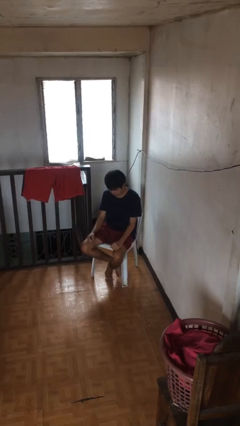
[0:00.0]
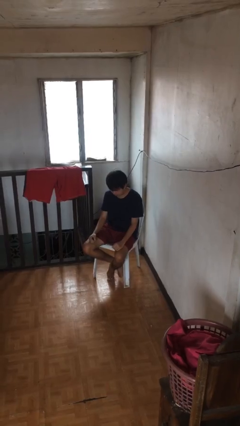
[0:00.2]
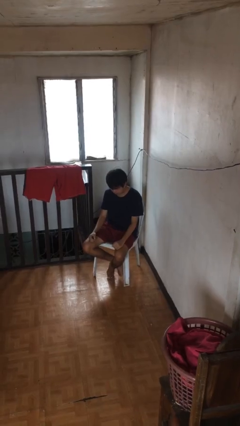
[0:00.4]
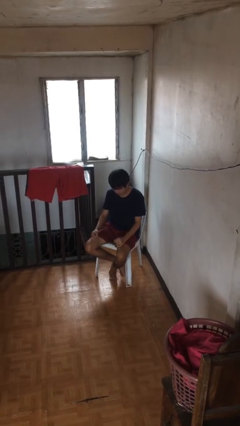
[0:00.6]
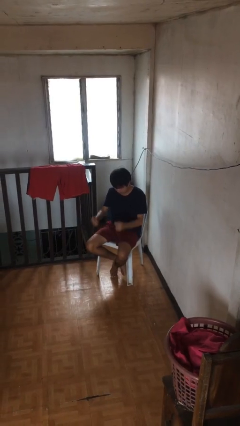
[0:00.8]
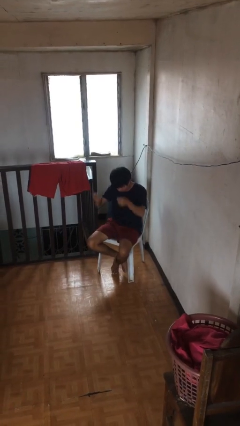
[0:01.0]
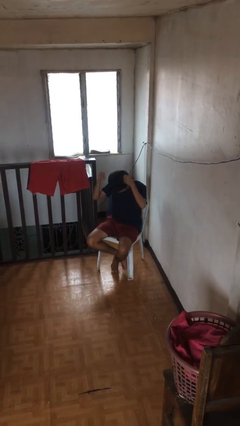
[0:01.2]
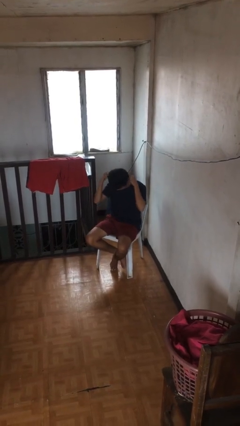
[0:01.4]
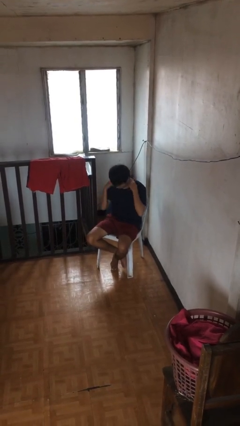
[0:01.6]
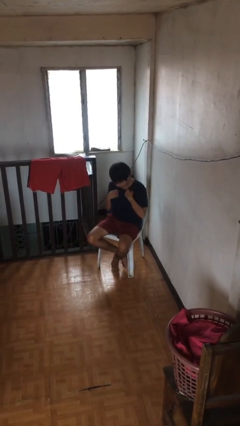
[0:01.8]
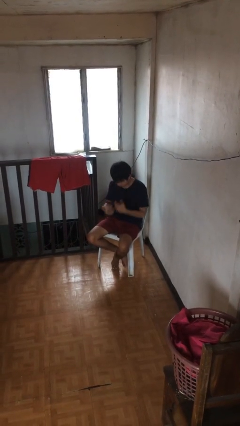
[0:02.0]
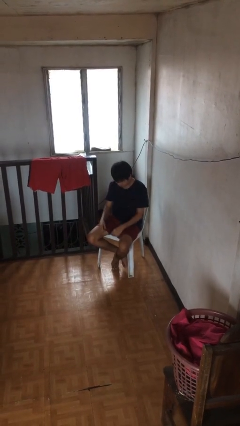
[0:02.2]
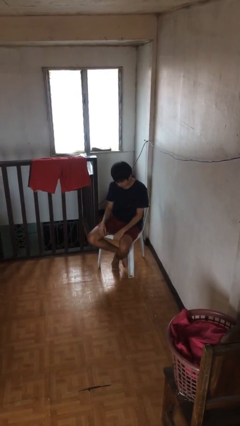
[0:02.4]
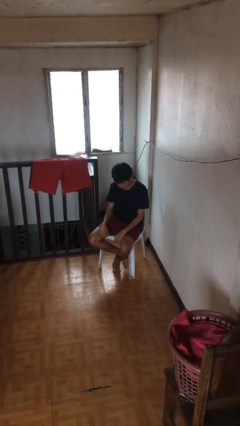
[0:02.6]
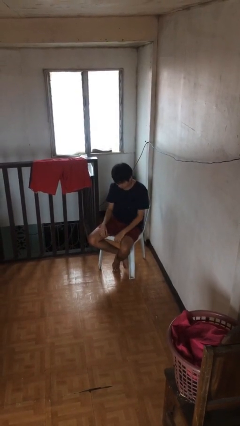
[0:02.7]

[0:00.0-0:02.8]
person puts on necklace

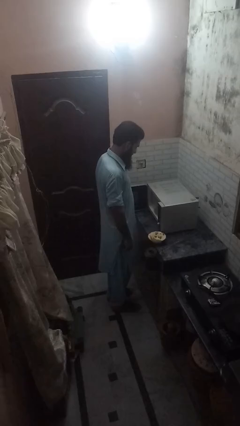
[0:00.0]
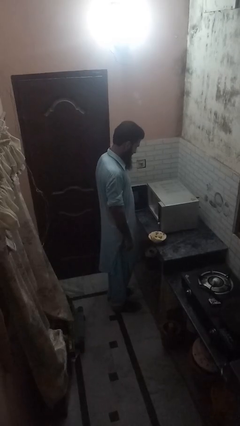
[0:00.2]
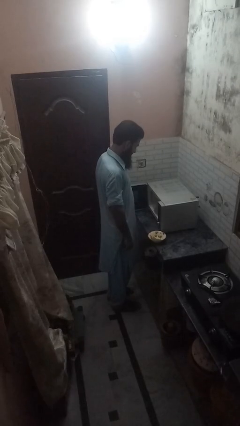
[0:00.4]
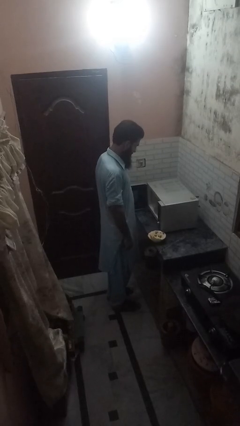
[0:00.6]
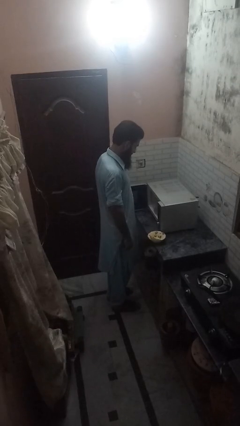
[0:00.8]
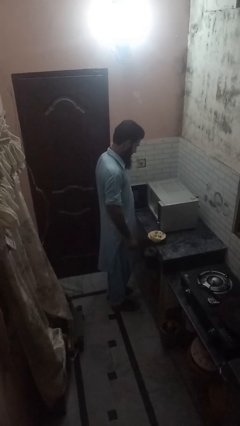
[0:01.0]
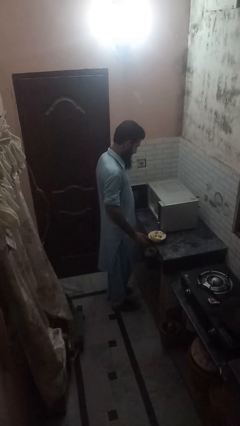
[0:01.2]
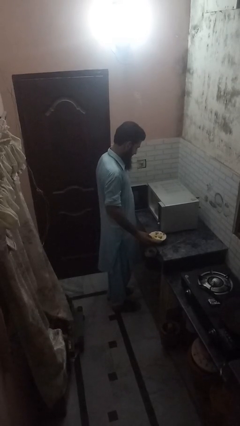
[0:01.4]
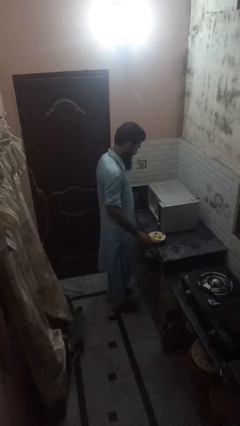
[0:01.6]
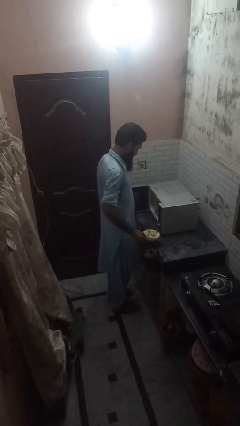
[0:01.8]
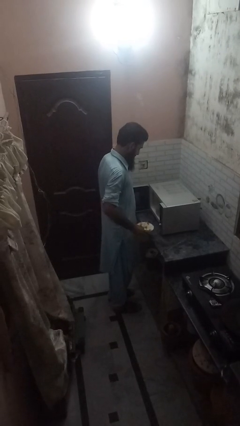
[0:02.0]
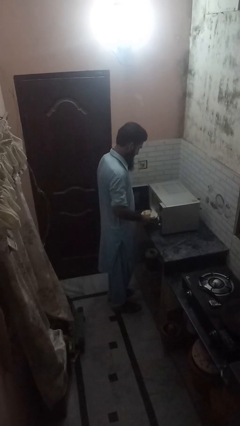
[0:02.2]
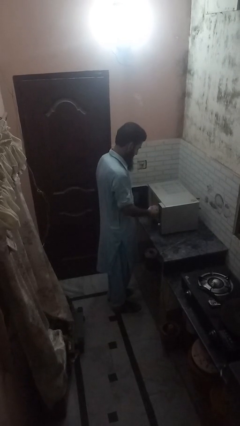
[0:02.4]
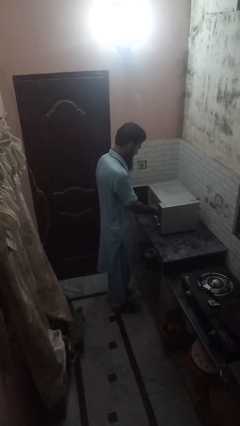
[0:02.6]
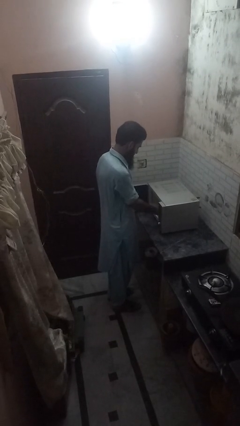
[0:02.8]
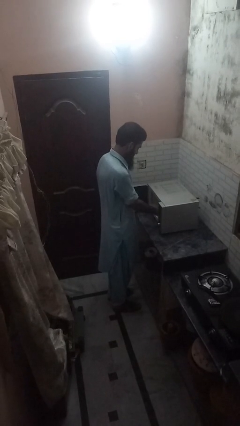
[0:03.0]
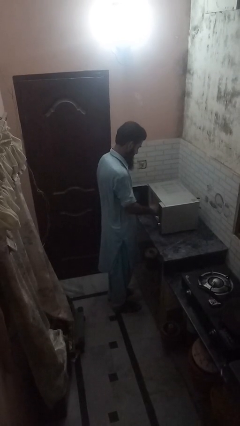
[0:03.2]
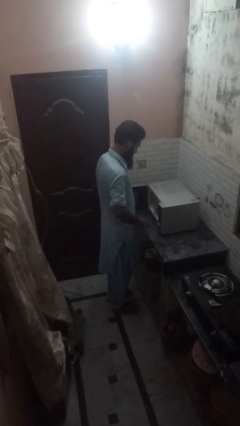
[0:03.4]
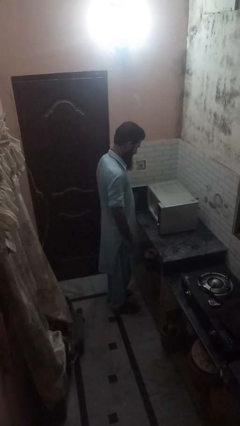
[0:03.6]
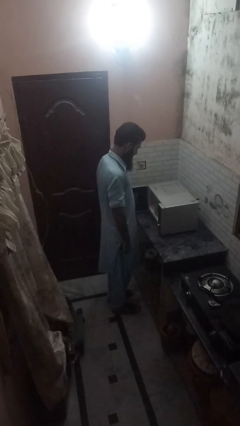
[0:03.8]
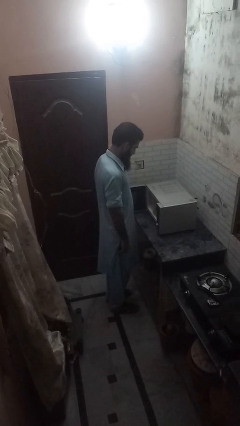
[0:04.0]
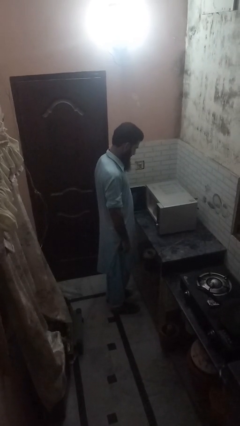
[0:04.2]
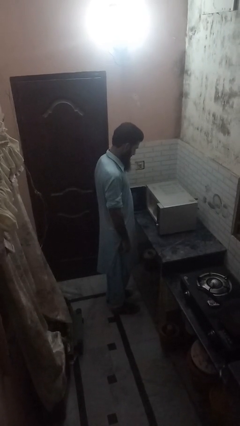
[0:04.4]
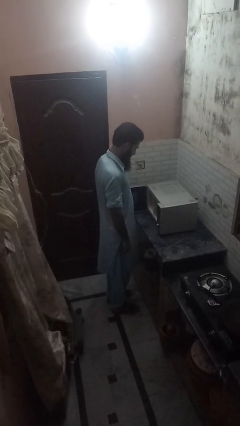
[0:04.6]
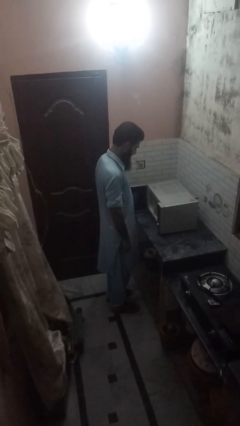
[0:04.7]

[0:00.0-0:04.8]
person puts object into microwave

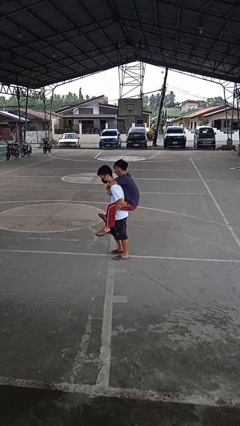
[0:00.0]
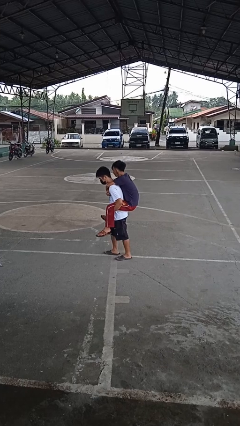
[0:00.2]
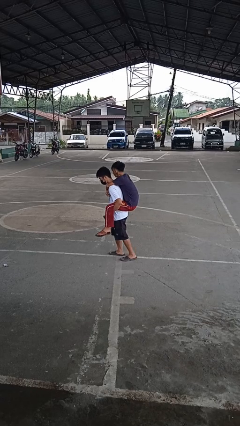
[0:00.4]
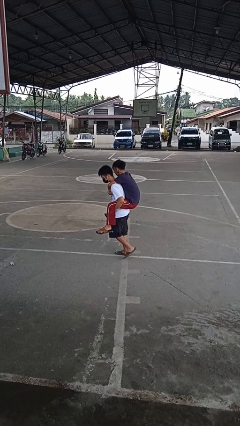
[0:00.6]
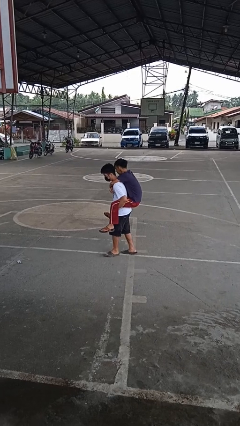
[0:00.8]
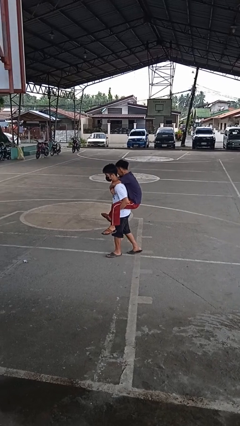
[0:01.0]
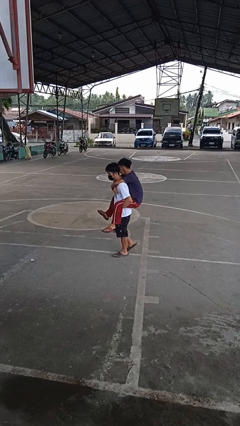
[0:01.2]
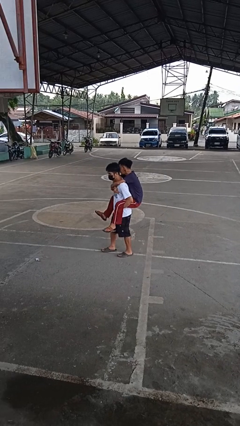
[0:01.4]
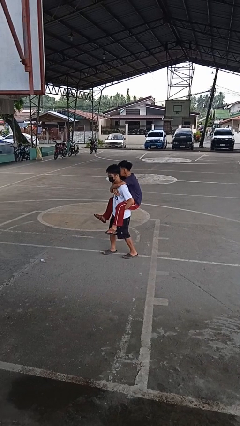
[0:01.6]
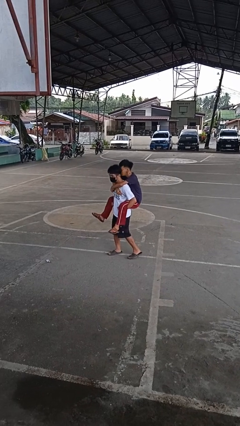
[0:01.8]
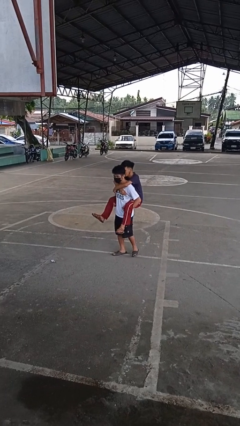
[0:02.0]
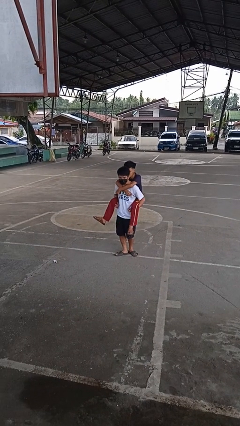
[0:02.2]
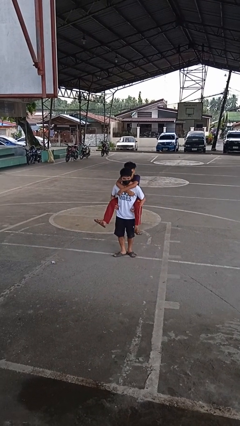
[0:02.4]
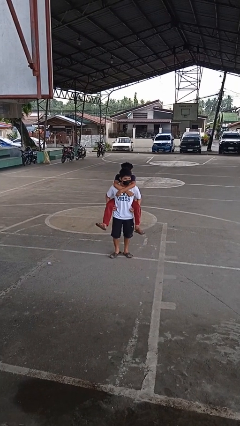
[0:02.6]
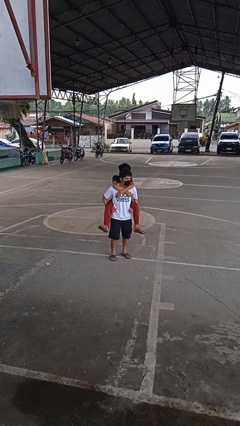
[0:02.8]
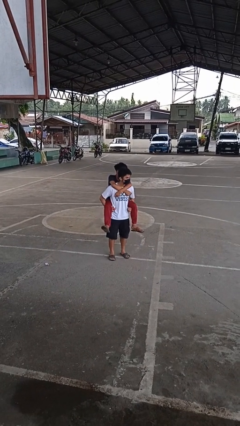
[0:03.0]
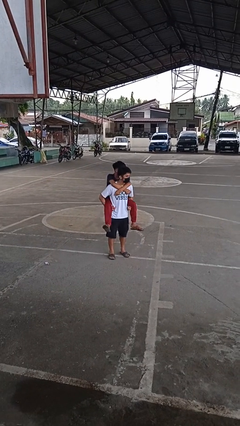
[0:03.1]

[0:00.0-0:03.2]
person carries person on back

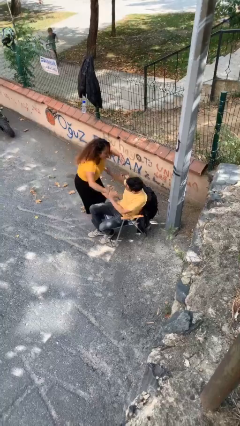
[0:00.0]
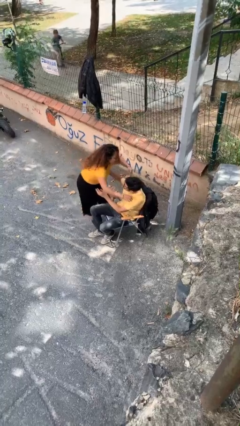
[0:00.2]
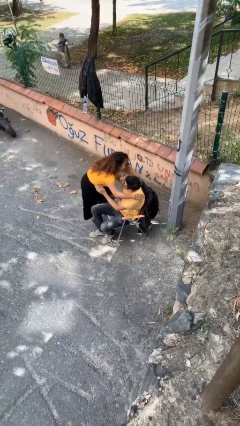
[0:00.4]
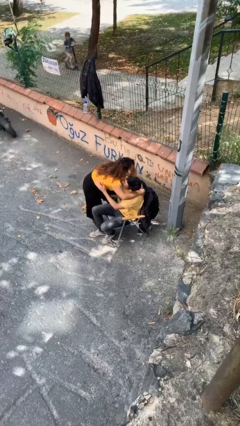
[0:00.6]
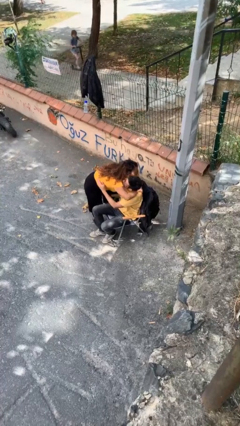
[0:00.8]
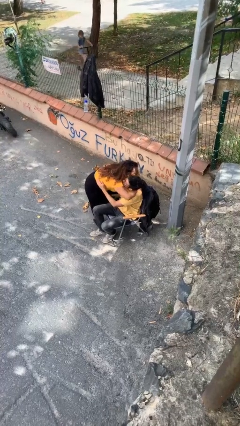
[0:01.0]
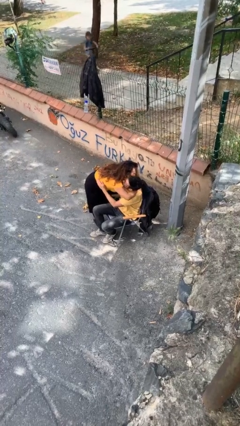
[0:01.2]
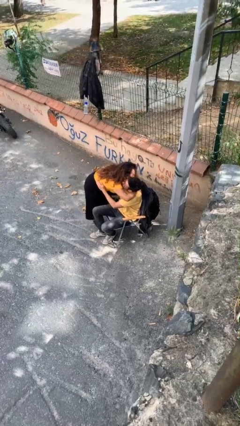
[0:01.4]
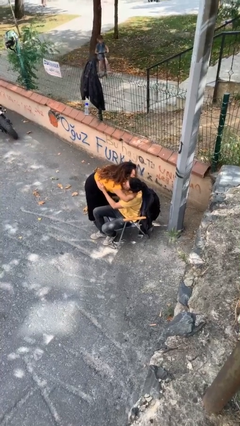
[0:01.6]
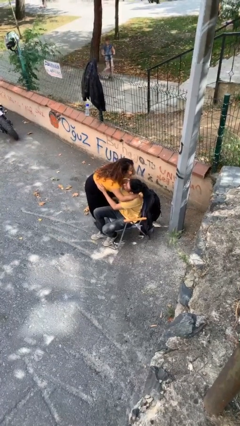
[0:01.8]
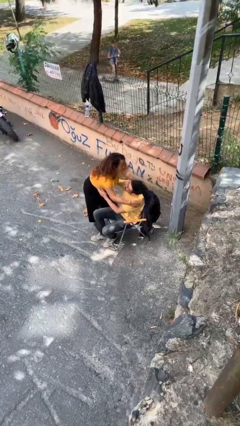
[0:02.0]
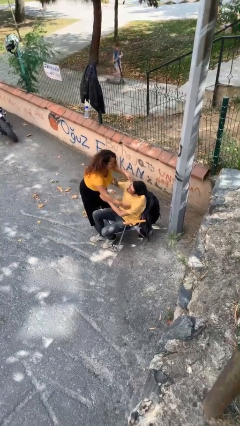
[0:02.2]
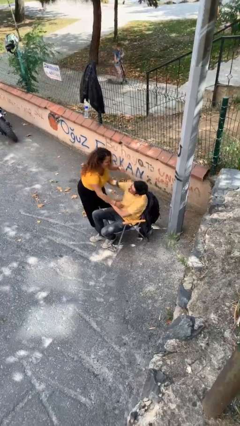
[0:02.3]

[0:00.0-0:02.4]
person embraces person

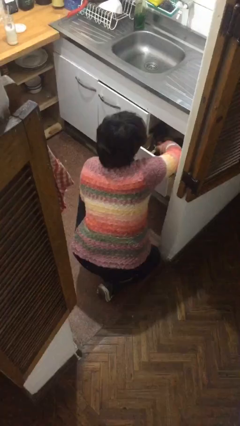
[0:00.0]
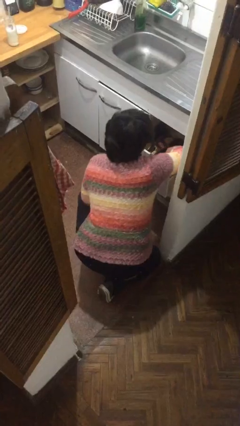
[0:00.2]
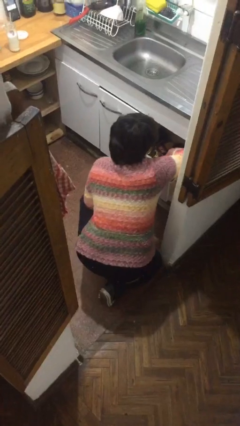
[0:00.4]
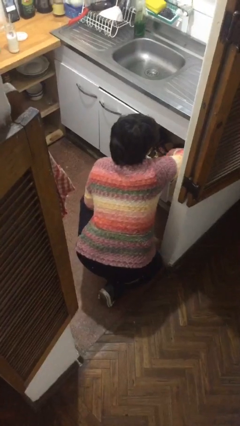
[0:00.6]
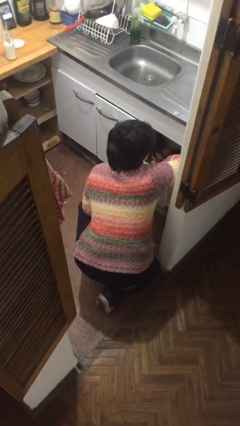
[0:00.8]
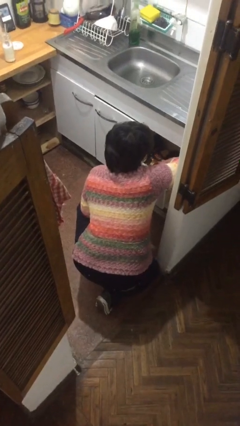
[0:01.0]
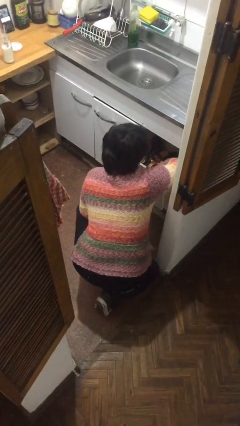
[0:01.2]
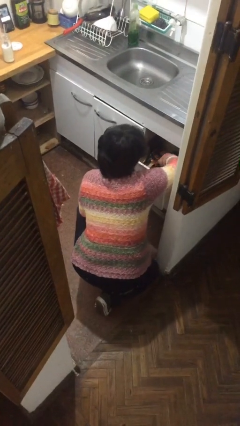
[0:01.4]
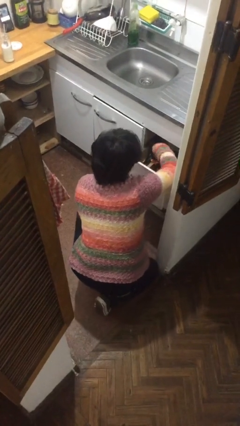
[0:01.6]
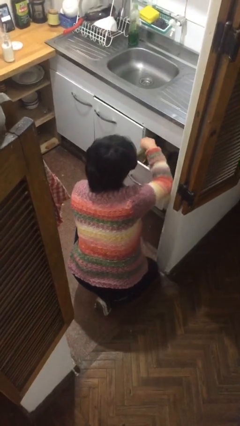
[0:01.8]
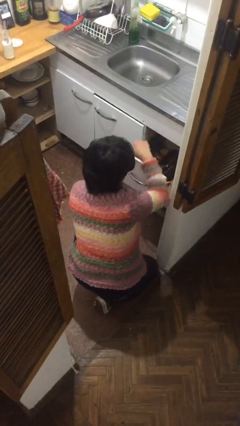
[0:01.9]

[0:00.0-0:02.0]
person searches in kitchen drawer

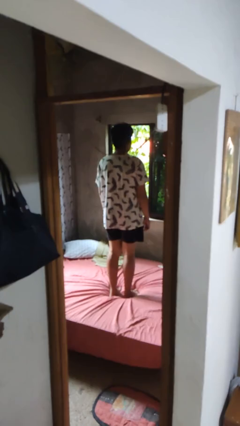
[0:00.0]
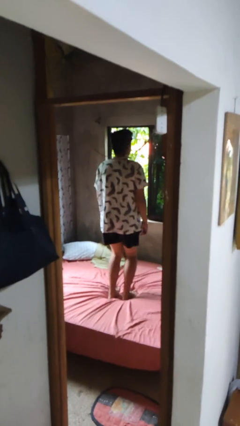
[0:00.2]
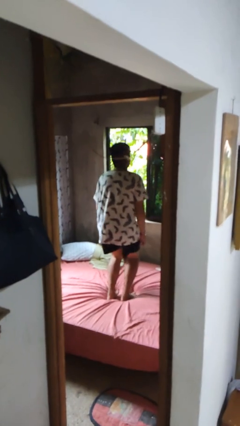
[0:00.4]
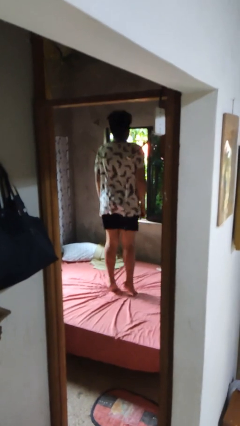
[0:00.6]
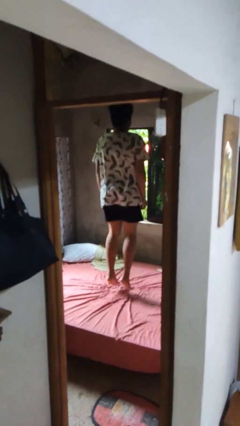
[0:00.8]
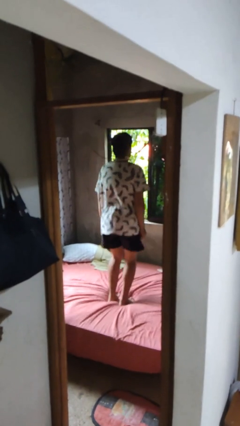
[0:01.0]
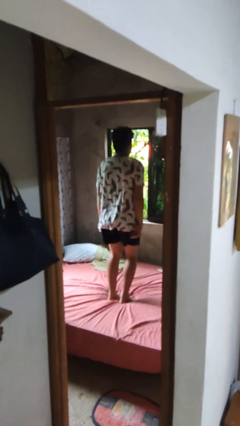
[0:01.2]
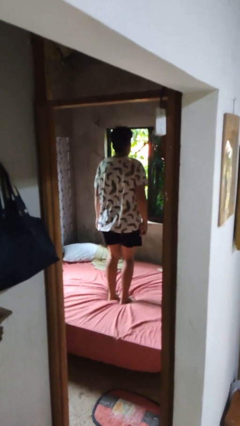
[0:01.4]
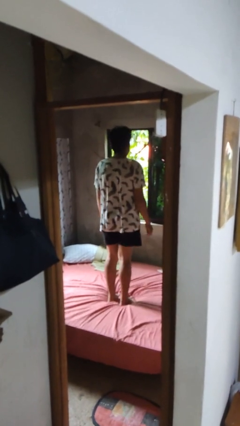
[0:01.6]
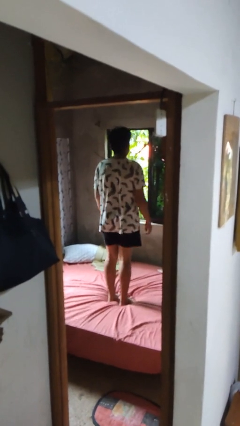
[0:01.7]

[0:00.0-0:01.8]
person jumps on bed

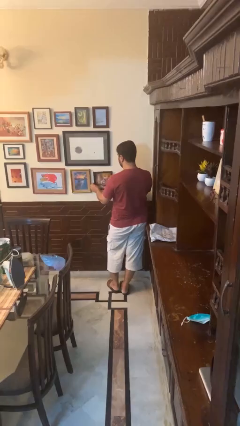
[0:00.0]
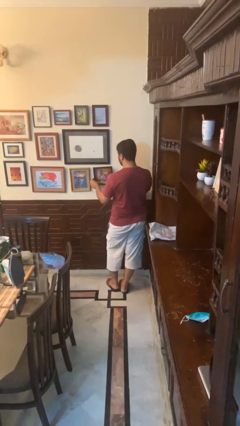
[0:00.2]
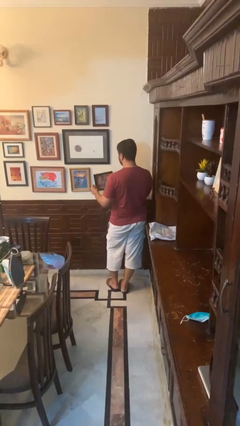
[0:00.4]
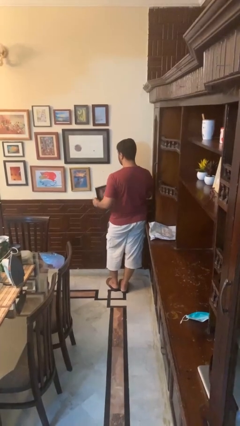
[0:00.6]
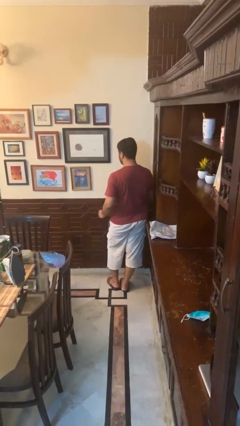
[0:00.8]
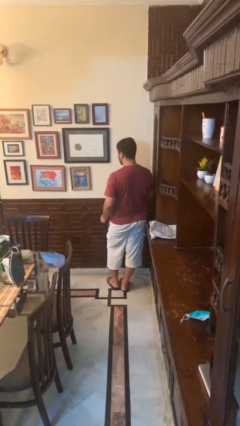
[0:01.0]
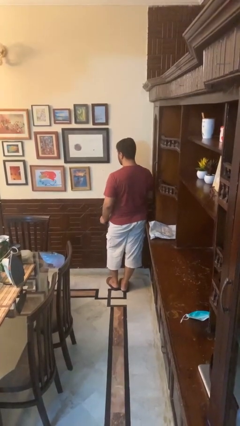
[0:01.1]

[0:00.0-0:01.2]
person takes down picture frame
